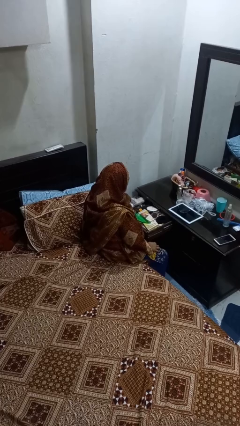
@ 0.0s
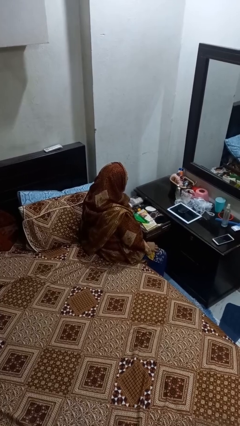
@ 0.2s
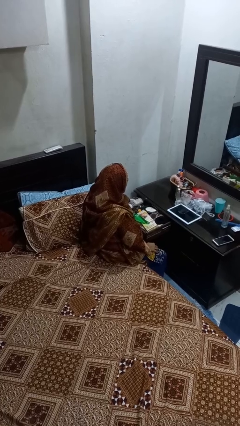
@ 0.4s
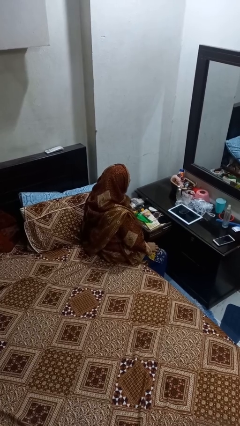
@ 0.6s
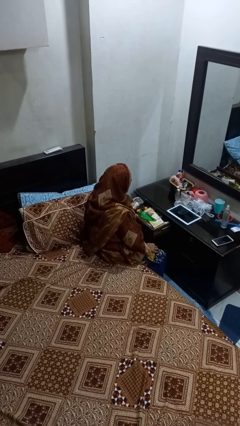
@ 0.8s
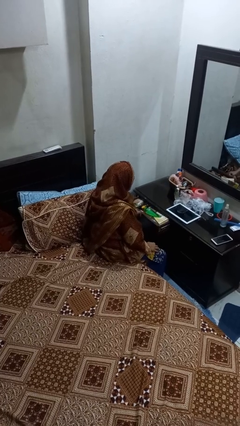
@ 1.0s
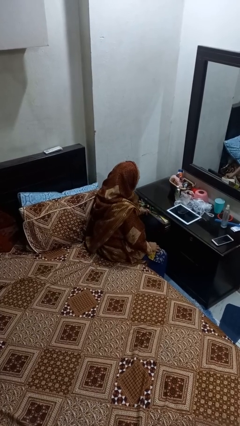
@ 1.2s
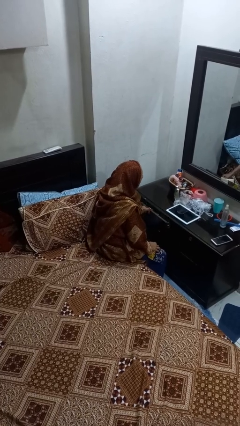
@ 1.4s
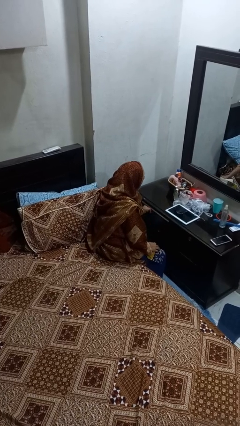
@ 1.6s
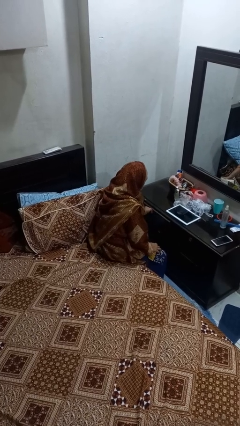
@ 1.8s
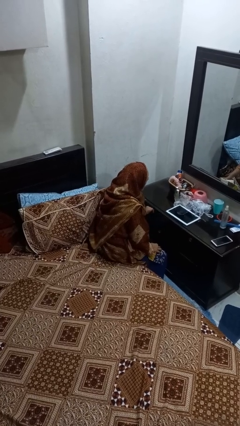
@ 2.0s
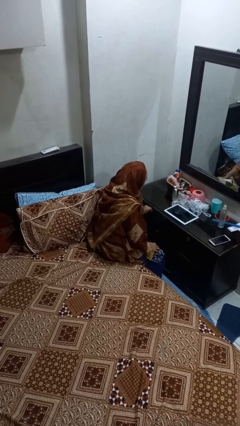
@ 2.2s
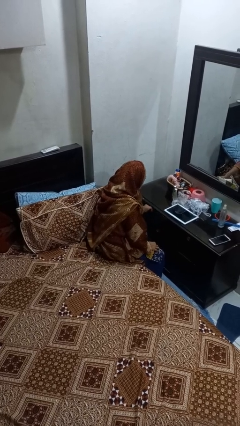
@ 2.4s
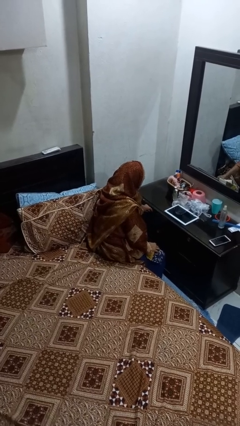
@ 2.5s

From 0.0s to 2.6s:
person closes dresser drawer

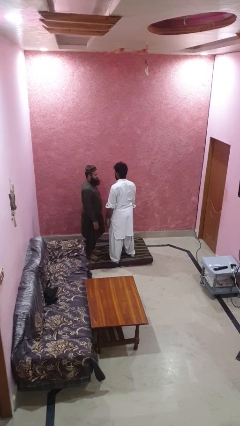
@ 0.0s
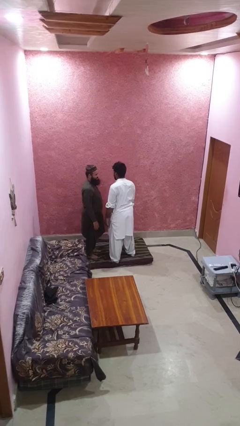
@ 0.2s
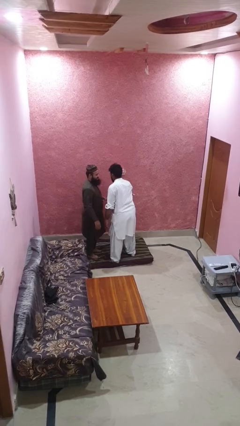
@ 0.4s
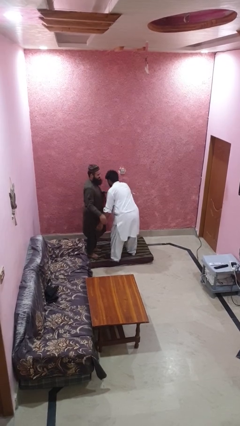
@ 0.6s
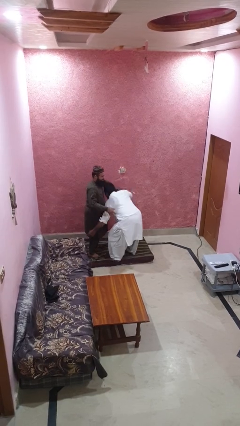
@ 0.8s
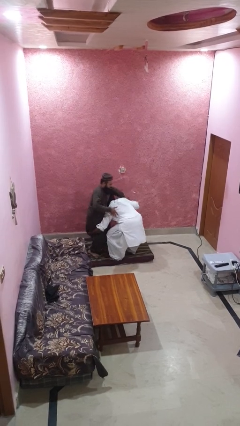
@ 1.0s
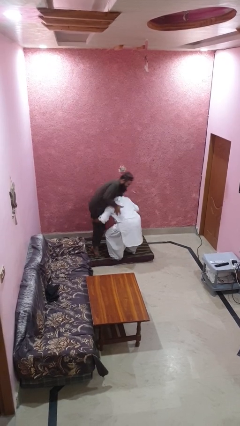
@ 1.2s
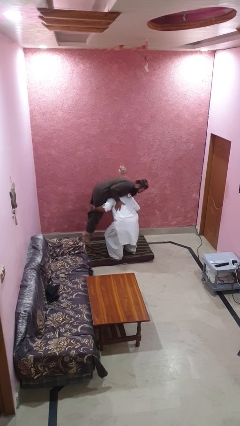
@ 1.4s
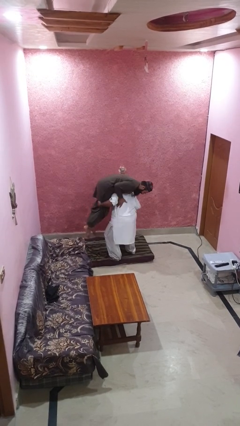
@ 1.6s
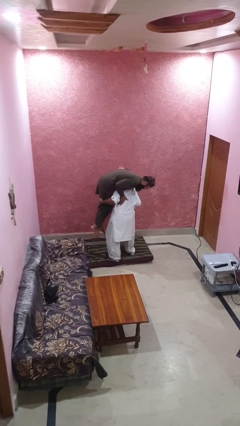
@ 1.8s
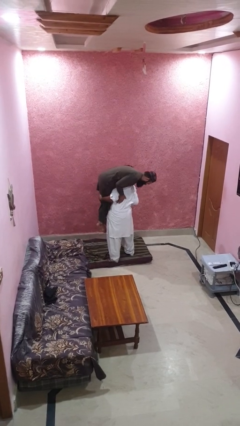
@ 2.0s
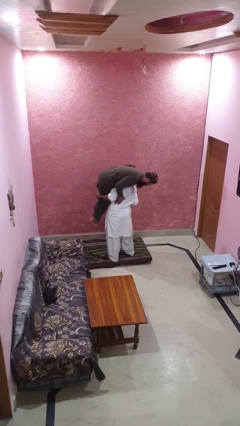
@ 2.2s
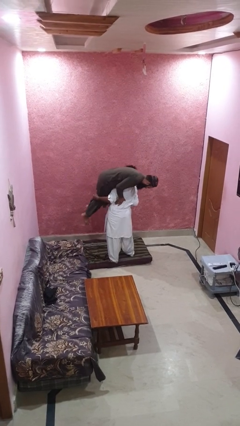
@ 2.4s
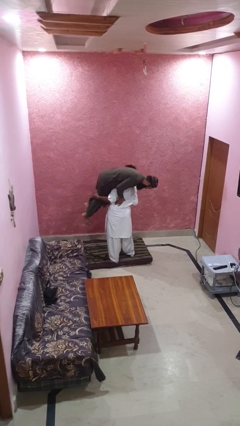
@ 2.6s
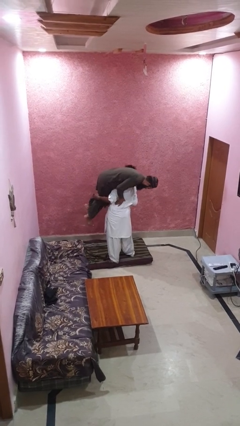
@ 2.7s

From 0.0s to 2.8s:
person carries person over shoulder

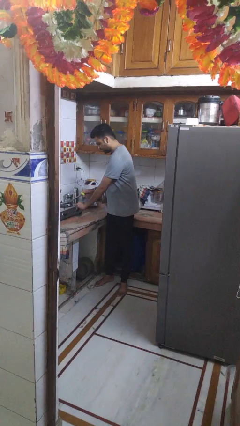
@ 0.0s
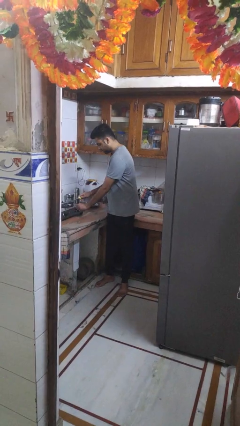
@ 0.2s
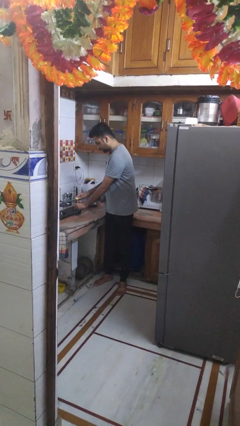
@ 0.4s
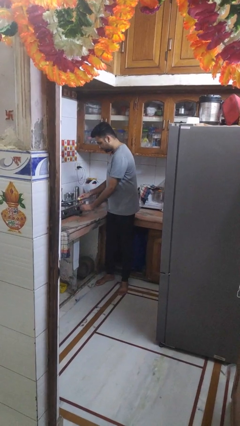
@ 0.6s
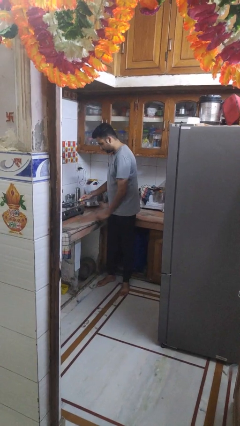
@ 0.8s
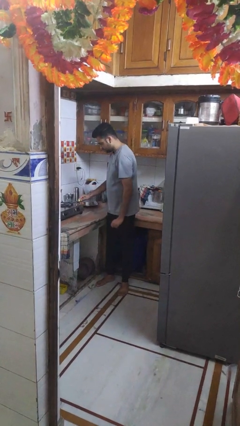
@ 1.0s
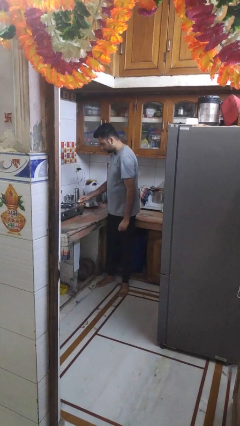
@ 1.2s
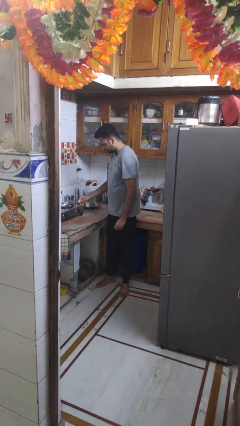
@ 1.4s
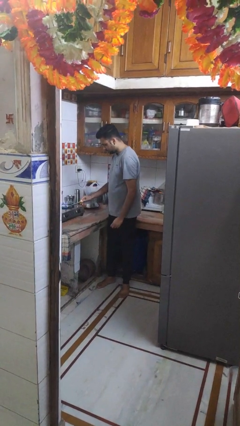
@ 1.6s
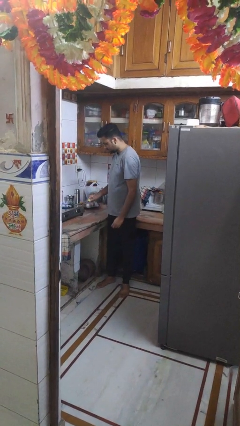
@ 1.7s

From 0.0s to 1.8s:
person turns on stovetop

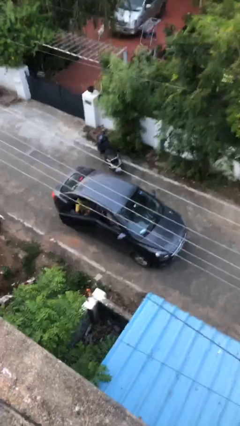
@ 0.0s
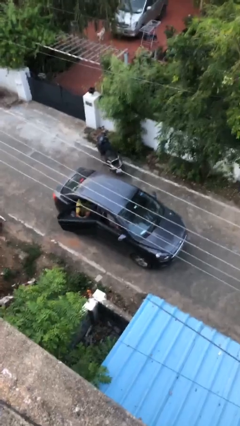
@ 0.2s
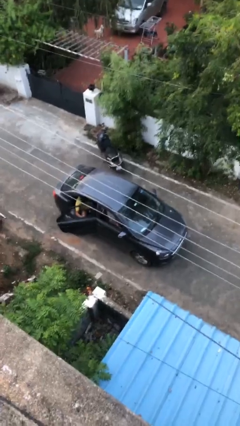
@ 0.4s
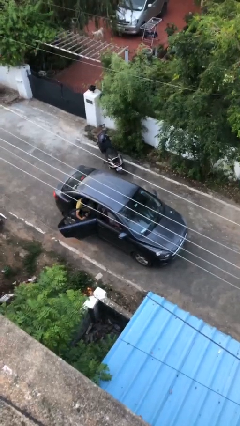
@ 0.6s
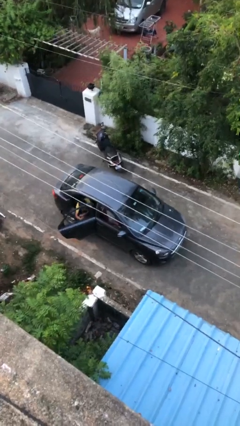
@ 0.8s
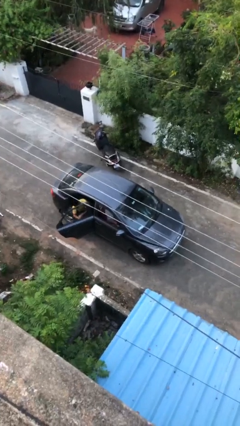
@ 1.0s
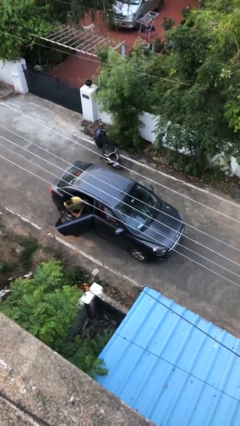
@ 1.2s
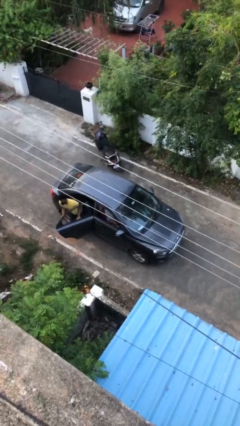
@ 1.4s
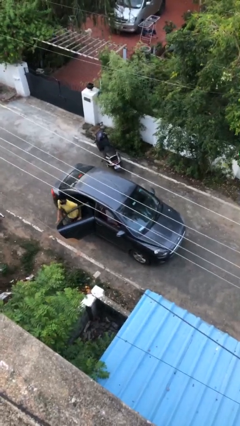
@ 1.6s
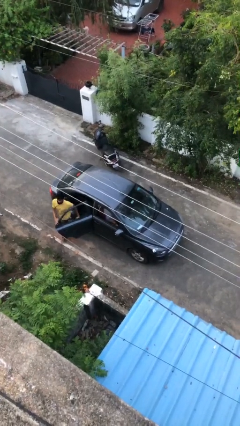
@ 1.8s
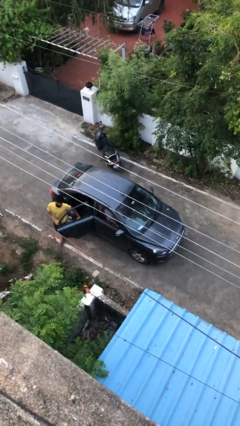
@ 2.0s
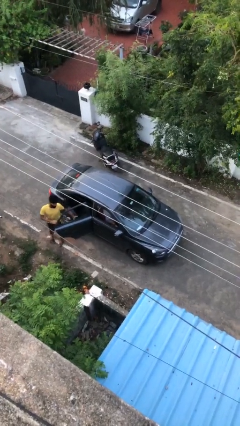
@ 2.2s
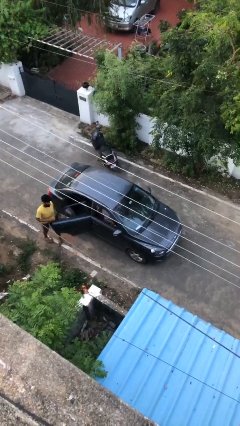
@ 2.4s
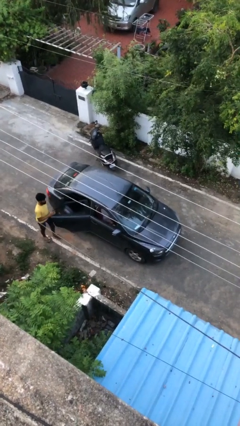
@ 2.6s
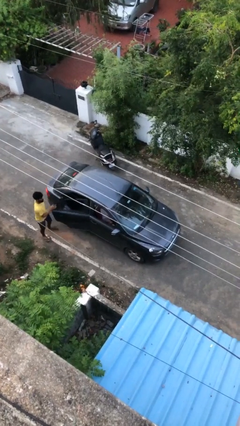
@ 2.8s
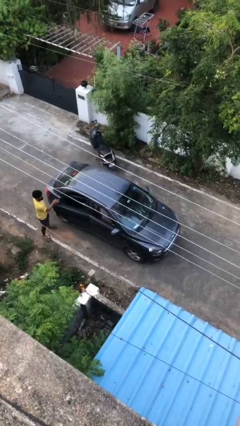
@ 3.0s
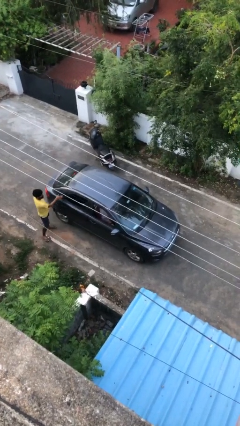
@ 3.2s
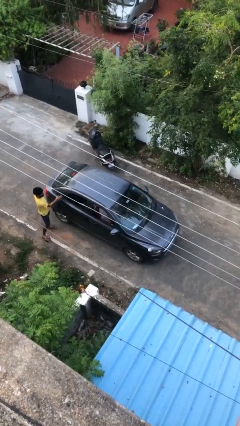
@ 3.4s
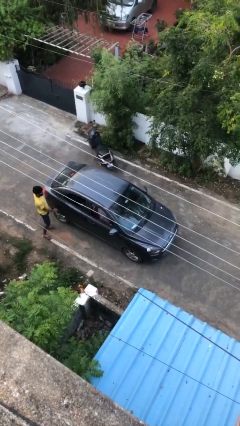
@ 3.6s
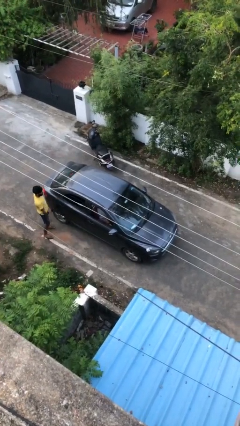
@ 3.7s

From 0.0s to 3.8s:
car drops off person

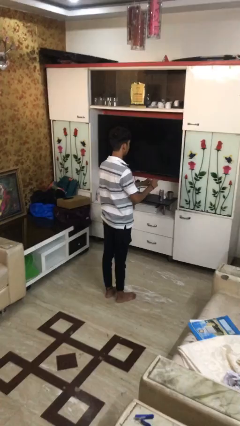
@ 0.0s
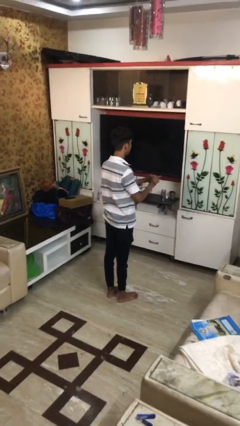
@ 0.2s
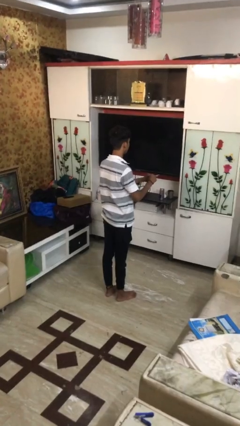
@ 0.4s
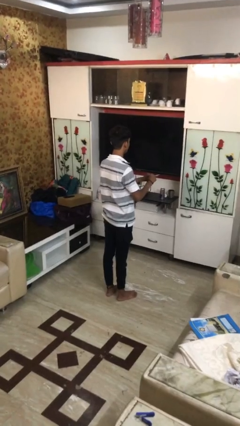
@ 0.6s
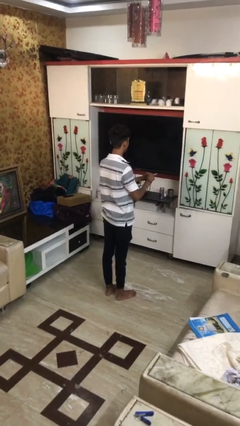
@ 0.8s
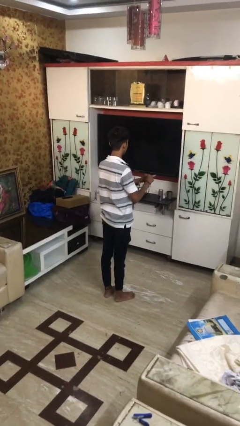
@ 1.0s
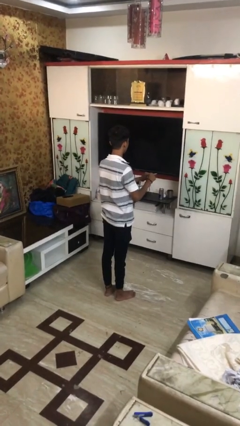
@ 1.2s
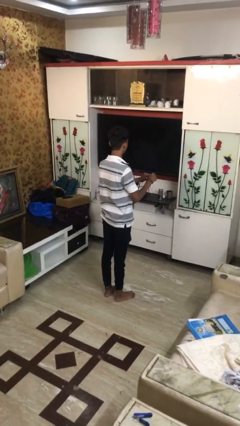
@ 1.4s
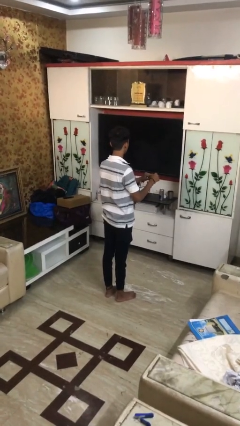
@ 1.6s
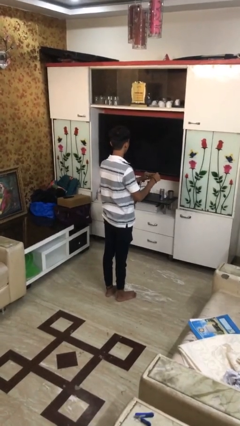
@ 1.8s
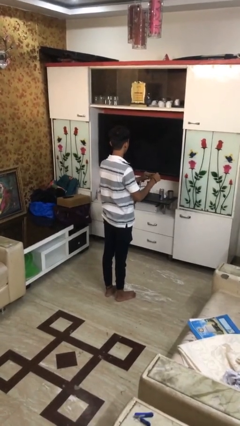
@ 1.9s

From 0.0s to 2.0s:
person files fingernails

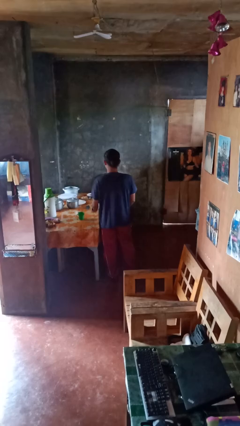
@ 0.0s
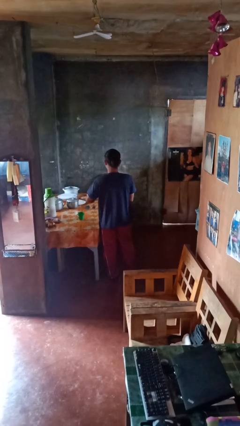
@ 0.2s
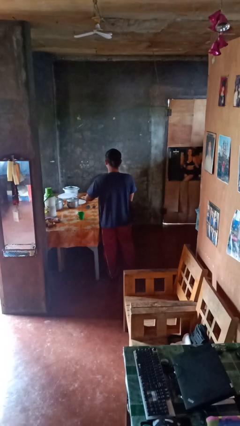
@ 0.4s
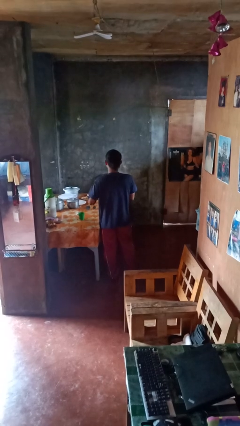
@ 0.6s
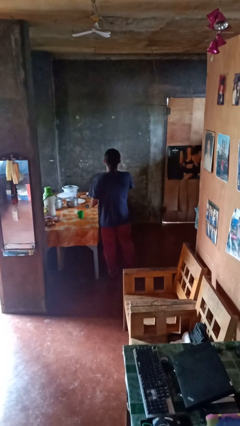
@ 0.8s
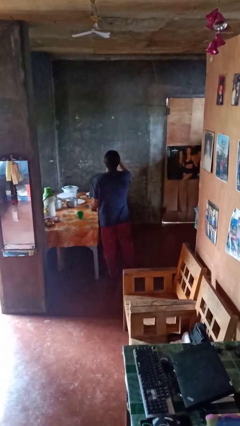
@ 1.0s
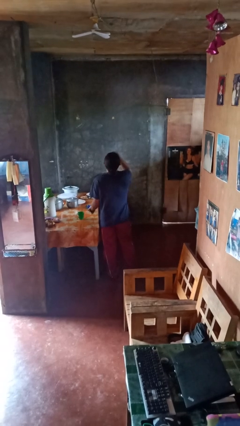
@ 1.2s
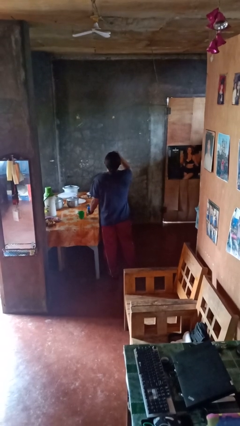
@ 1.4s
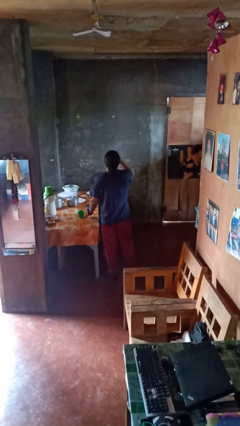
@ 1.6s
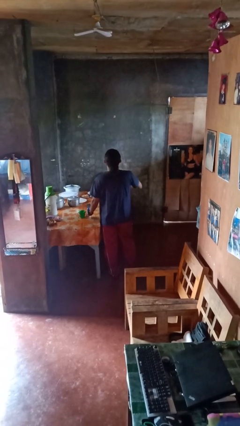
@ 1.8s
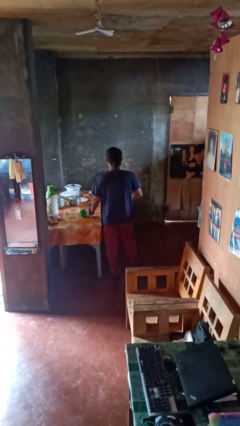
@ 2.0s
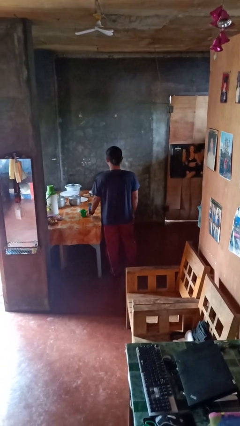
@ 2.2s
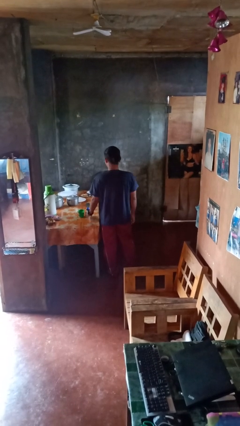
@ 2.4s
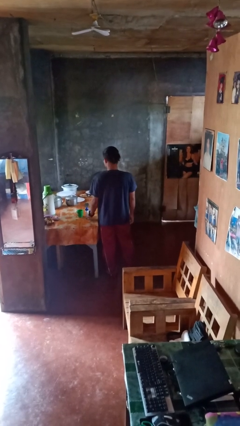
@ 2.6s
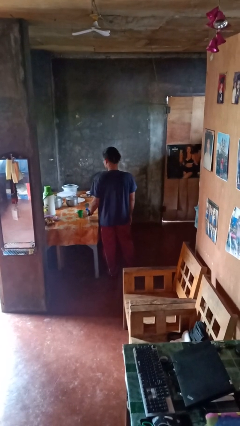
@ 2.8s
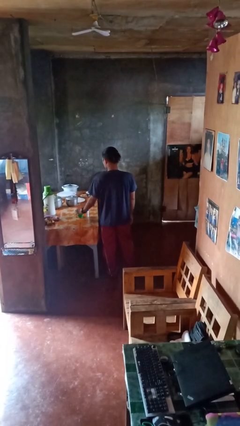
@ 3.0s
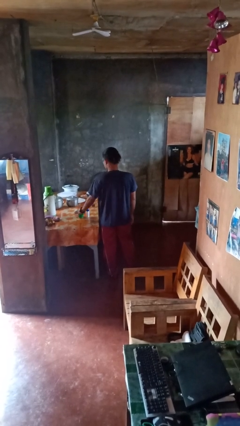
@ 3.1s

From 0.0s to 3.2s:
person takes medicine pills

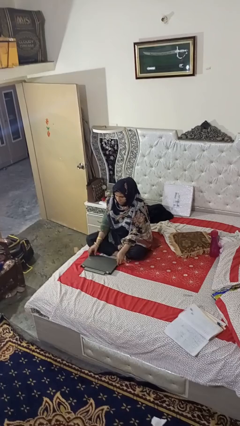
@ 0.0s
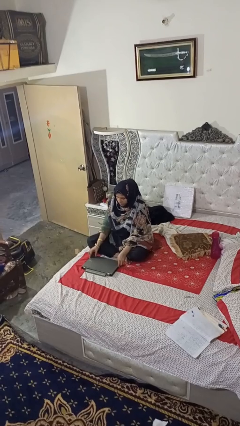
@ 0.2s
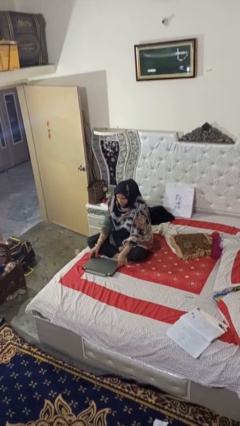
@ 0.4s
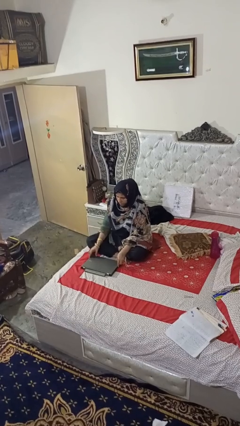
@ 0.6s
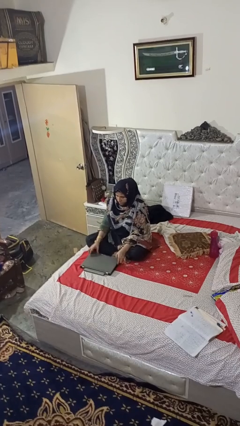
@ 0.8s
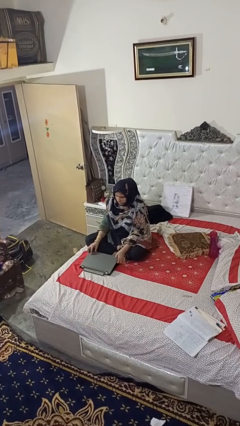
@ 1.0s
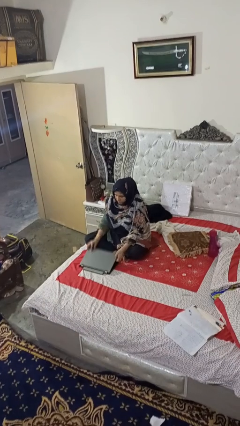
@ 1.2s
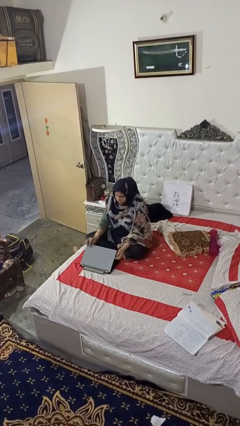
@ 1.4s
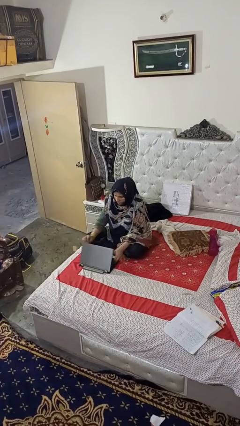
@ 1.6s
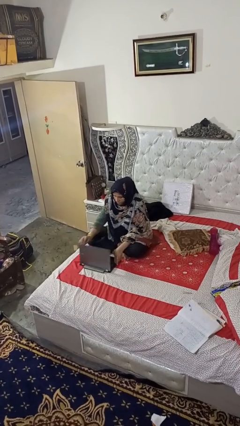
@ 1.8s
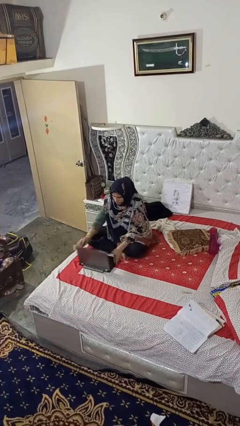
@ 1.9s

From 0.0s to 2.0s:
person opens laptop
